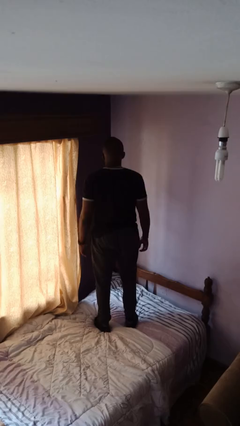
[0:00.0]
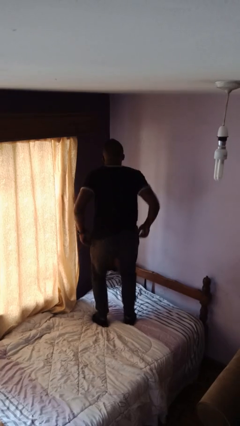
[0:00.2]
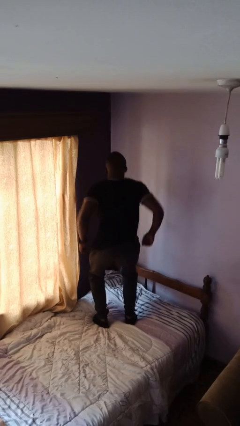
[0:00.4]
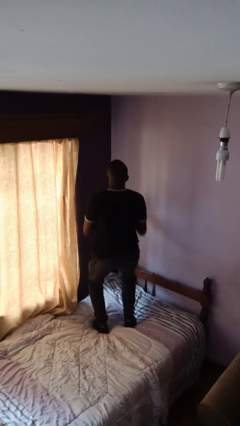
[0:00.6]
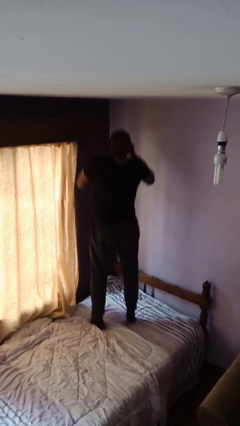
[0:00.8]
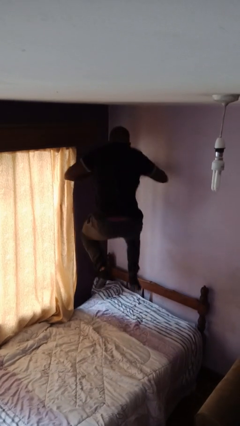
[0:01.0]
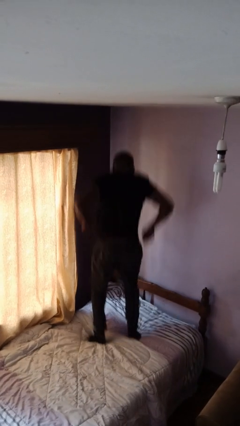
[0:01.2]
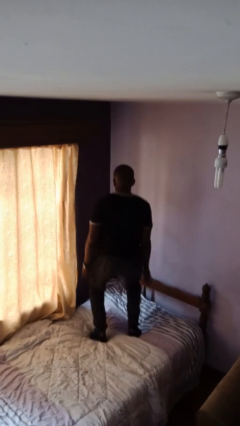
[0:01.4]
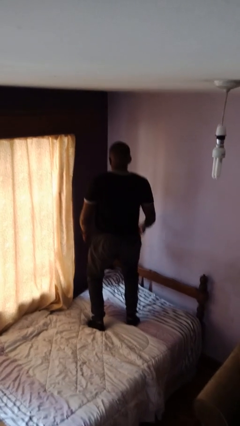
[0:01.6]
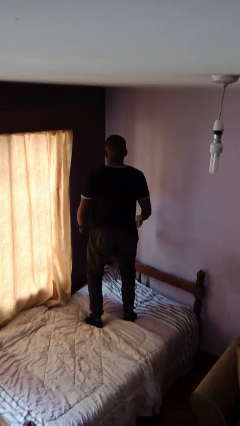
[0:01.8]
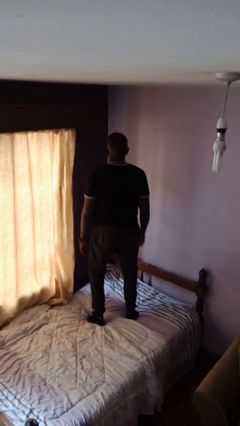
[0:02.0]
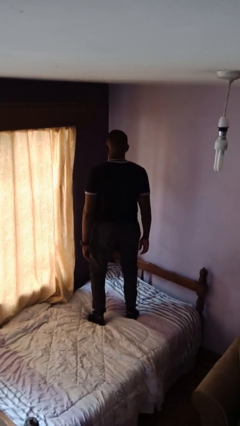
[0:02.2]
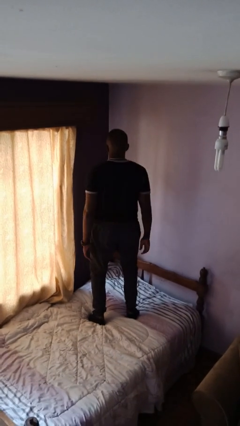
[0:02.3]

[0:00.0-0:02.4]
person jumps on bed

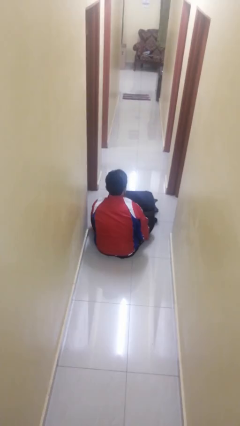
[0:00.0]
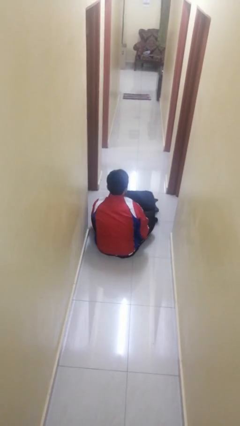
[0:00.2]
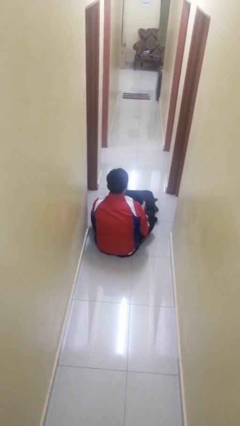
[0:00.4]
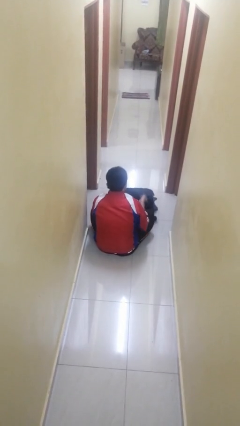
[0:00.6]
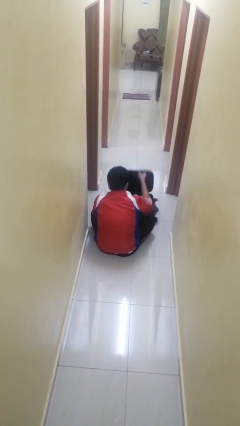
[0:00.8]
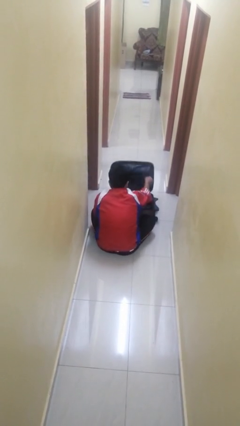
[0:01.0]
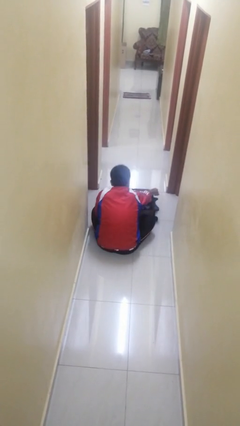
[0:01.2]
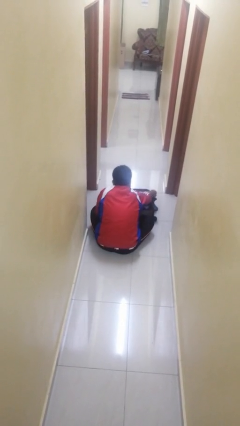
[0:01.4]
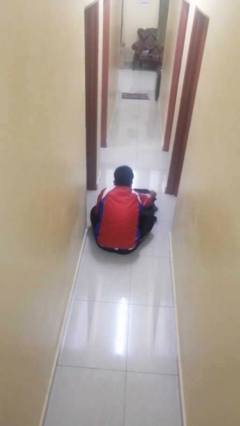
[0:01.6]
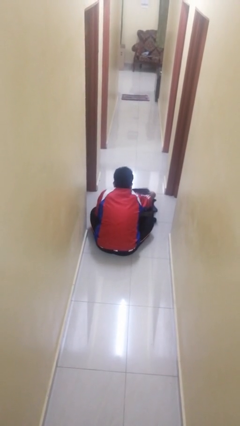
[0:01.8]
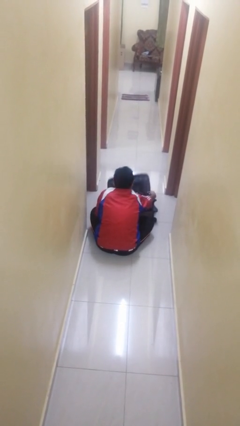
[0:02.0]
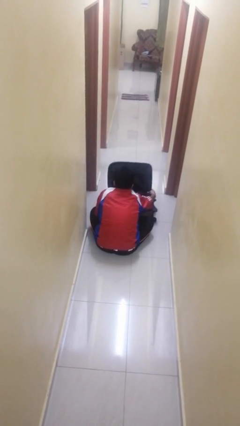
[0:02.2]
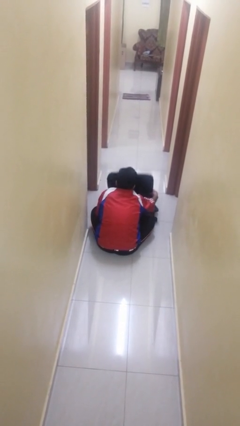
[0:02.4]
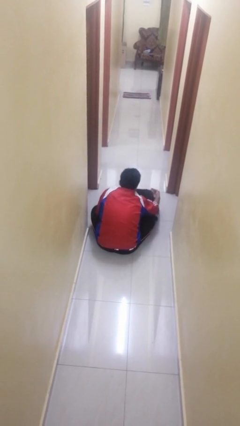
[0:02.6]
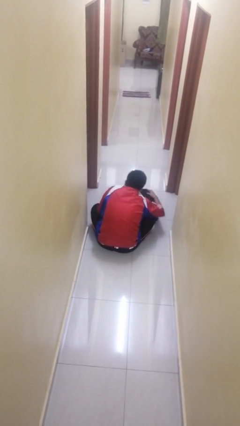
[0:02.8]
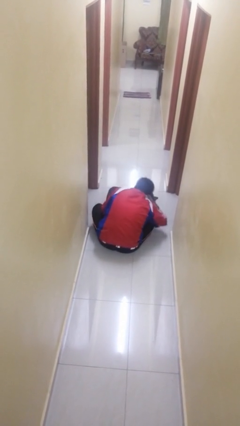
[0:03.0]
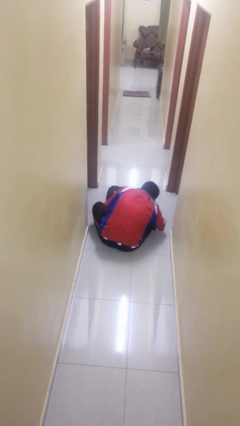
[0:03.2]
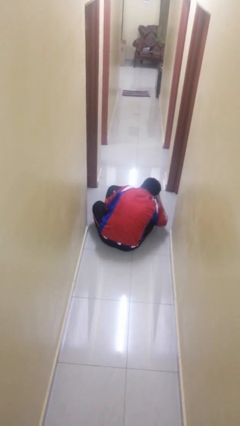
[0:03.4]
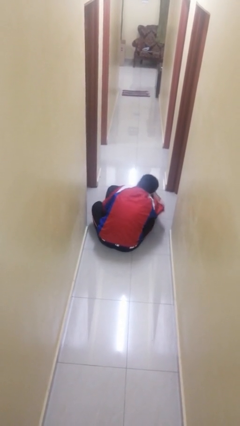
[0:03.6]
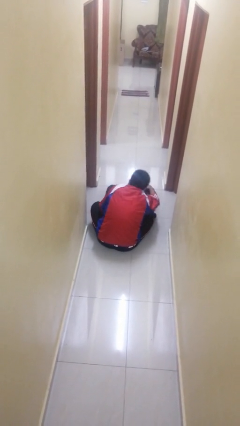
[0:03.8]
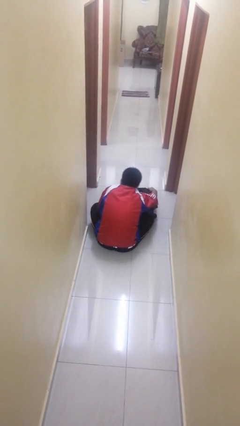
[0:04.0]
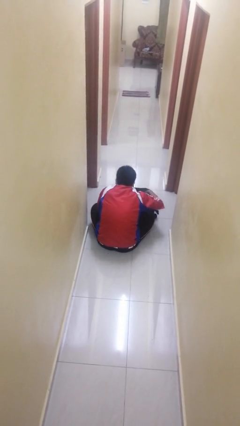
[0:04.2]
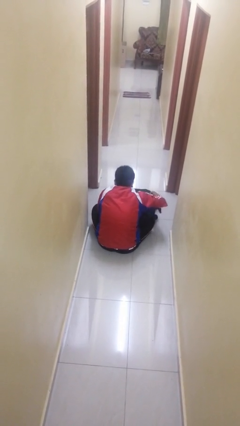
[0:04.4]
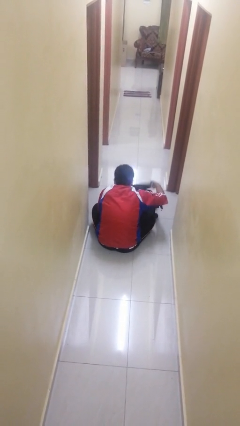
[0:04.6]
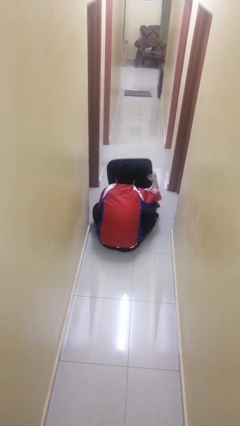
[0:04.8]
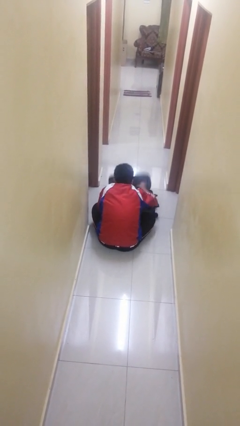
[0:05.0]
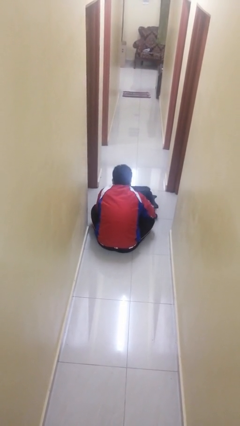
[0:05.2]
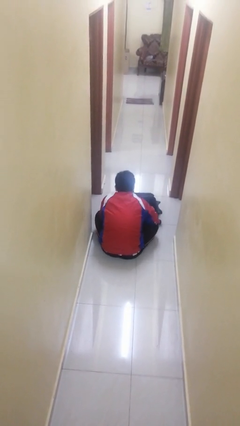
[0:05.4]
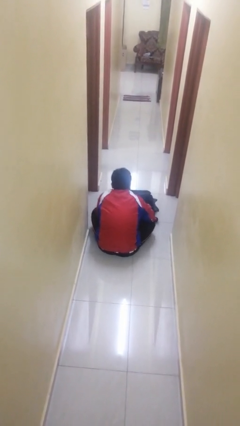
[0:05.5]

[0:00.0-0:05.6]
person opens suitcase

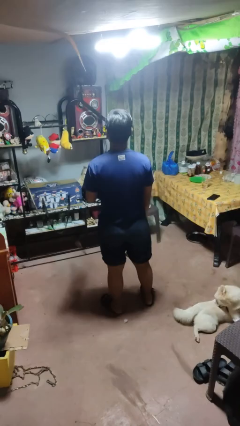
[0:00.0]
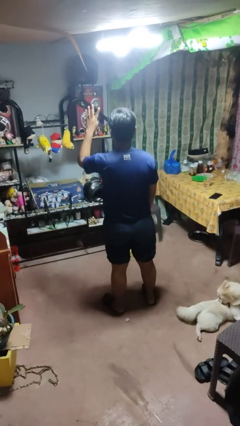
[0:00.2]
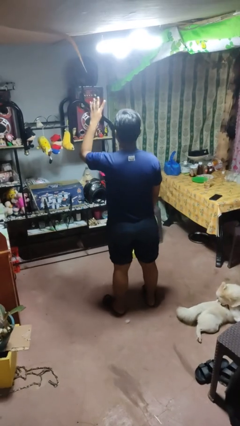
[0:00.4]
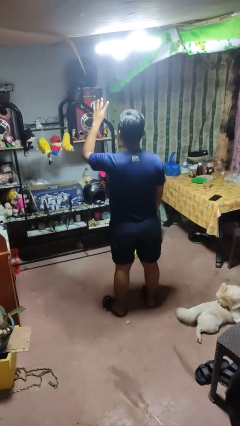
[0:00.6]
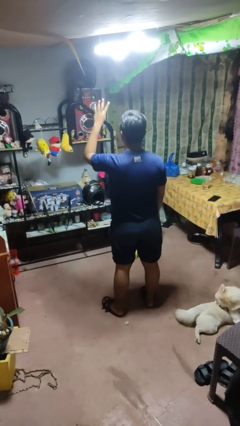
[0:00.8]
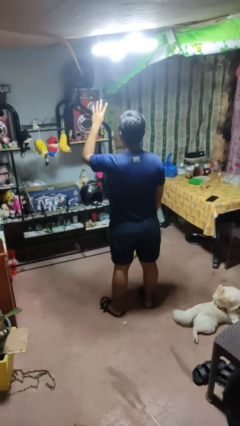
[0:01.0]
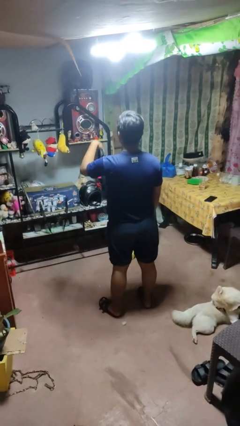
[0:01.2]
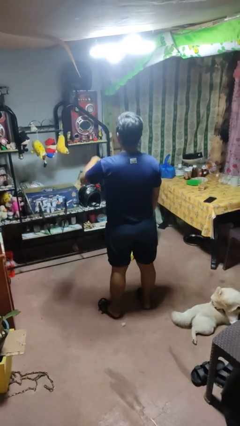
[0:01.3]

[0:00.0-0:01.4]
person gestures number four

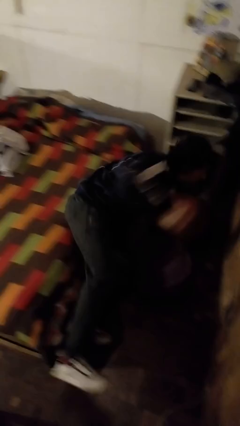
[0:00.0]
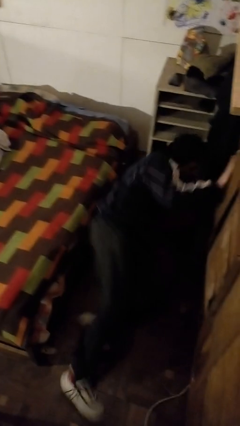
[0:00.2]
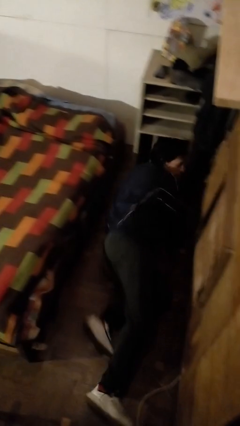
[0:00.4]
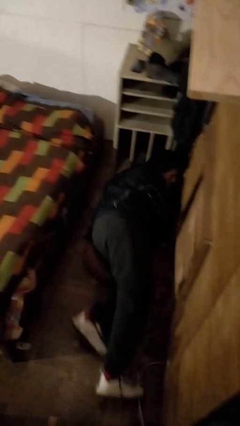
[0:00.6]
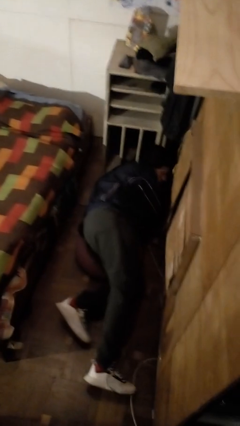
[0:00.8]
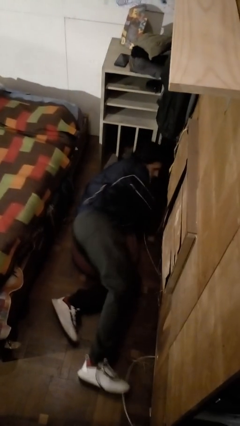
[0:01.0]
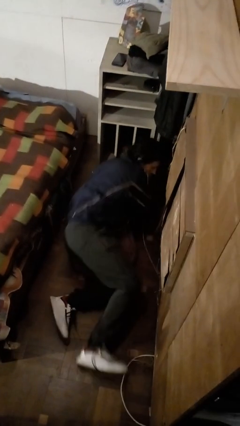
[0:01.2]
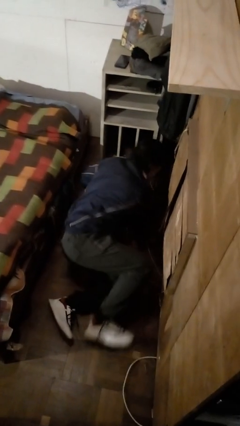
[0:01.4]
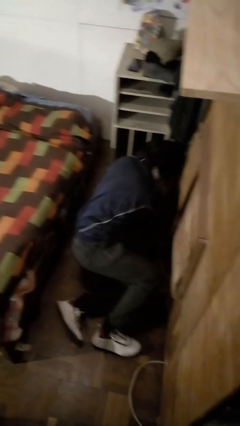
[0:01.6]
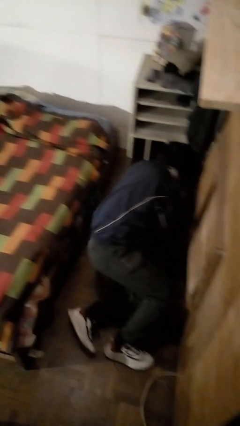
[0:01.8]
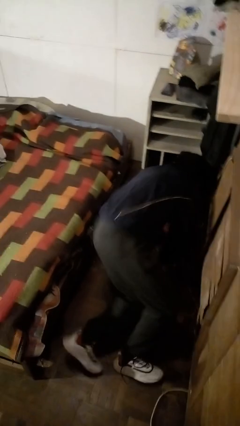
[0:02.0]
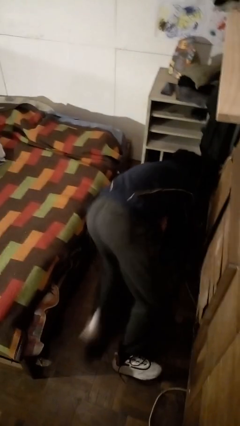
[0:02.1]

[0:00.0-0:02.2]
person falls from bed

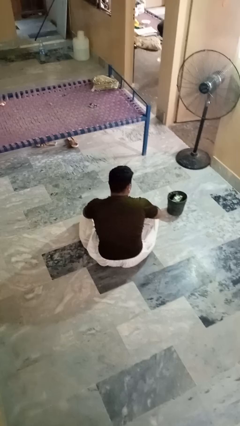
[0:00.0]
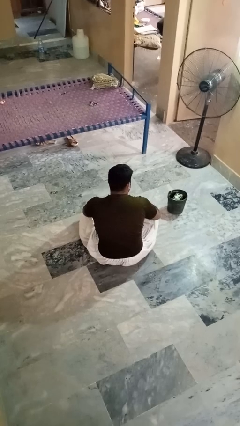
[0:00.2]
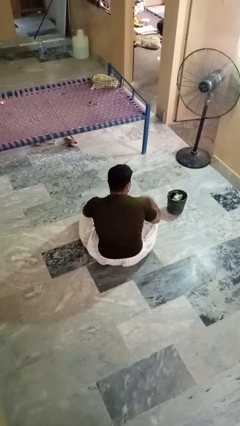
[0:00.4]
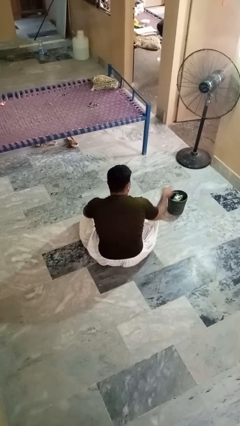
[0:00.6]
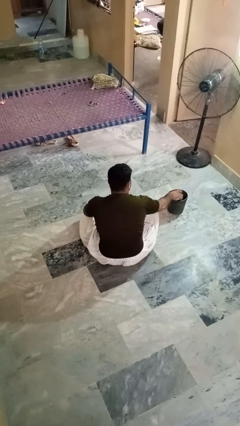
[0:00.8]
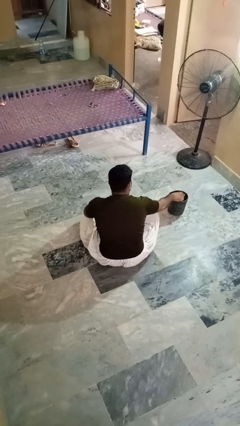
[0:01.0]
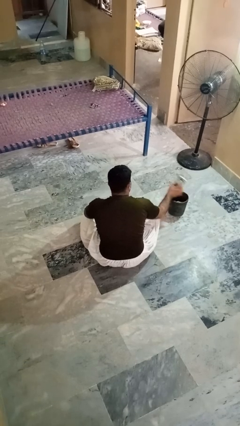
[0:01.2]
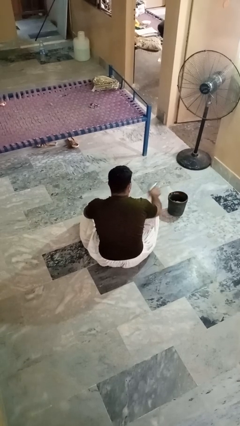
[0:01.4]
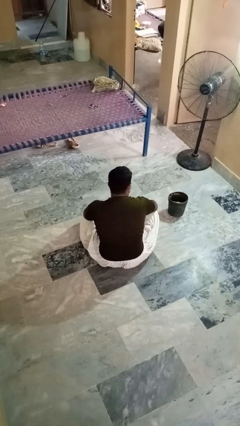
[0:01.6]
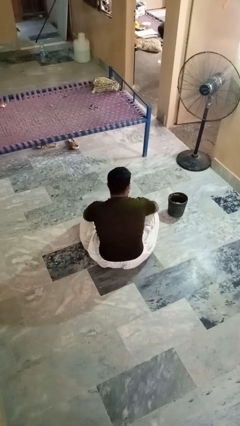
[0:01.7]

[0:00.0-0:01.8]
person takes object from basket

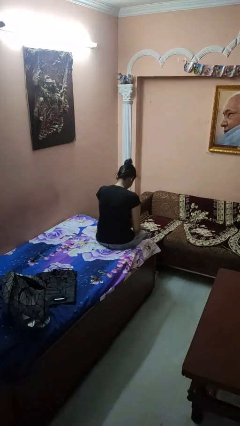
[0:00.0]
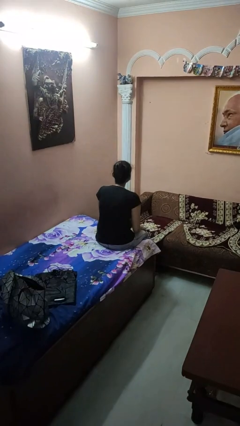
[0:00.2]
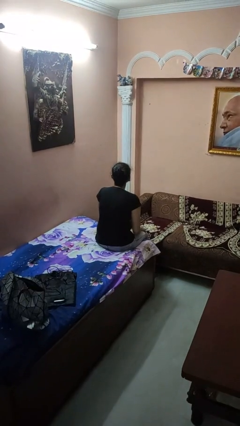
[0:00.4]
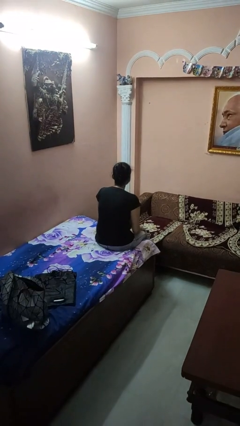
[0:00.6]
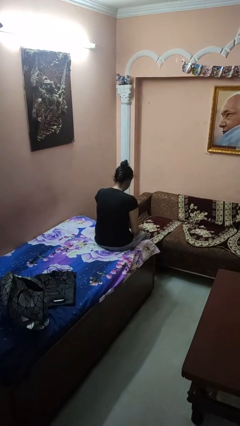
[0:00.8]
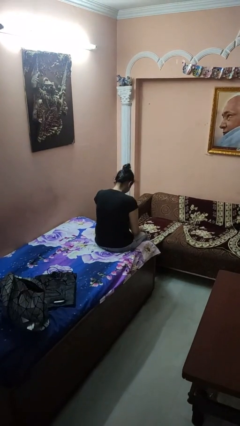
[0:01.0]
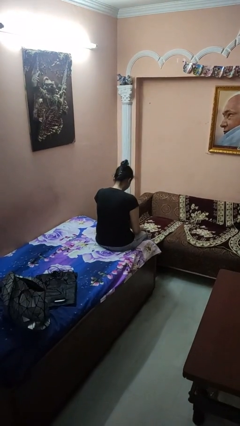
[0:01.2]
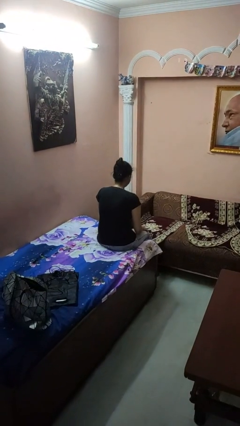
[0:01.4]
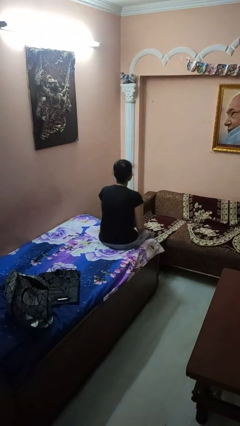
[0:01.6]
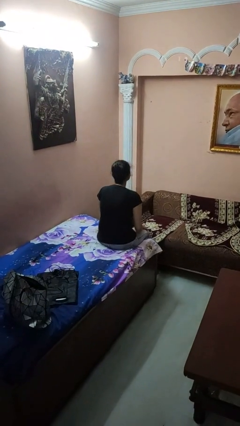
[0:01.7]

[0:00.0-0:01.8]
person nods head

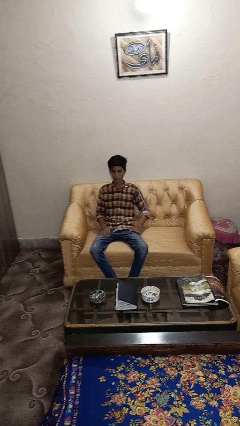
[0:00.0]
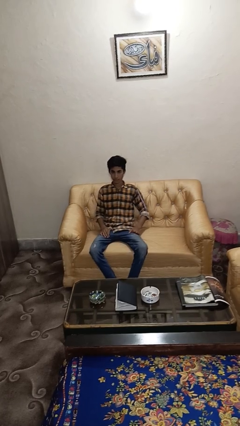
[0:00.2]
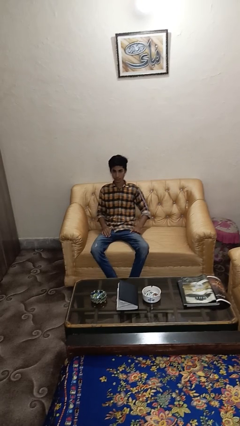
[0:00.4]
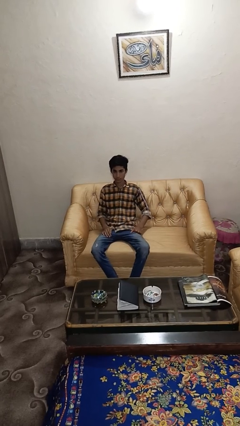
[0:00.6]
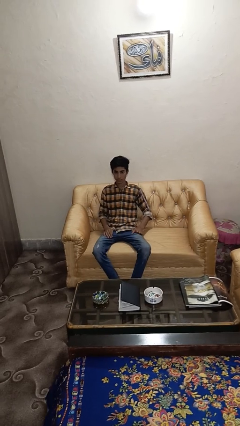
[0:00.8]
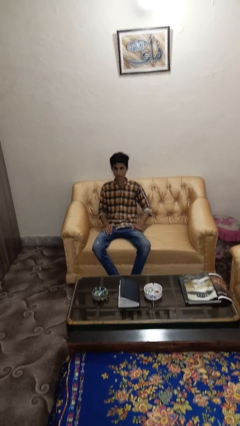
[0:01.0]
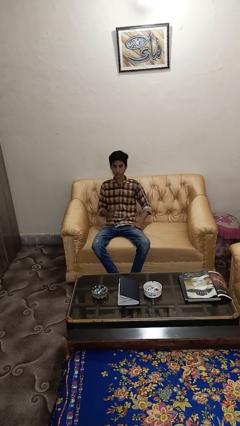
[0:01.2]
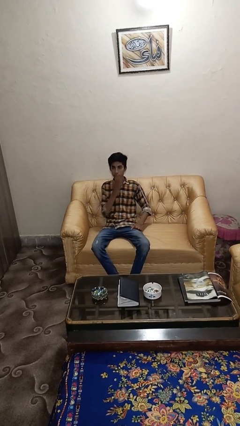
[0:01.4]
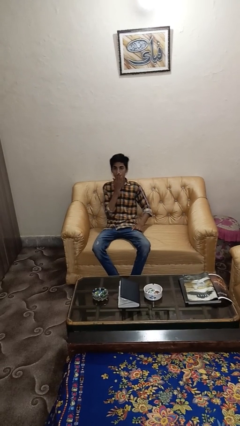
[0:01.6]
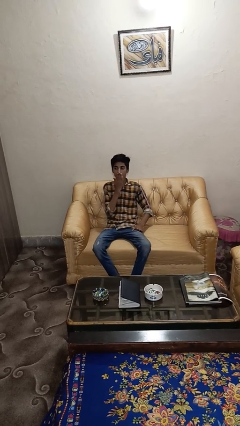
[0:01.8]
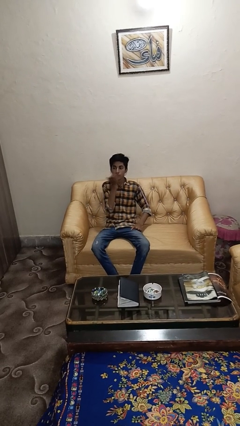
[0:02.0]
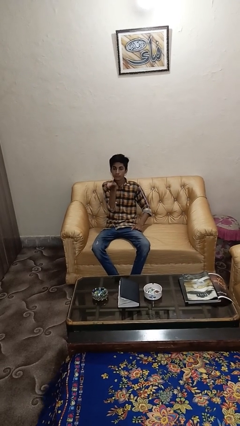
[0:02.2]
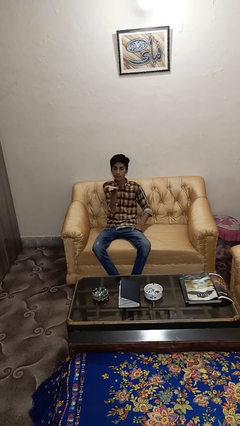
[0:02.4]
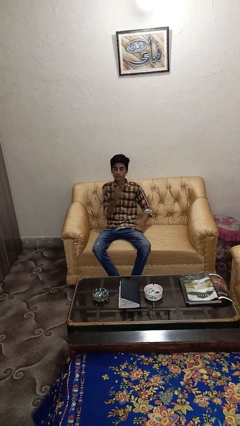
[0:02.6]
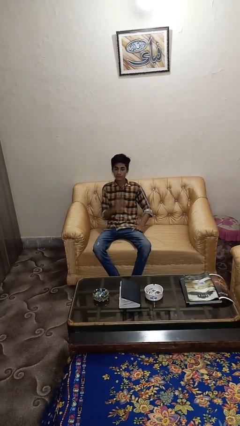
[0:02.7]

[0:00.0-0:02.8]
person gestures blow kiss
